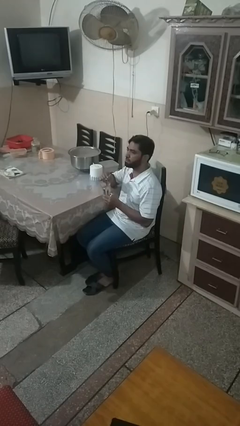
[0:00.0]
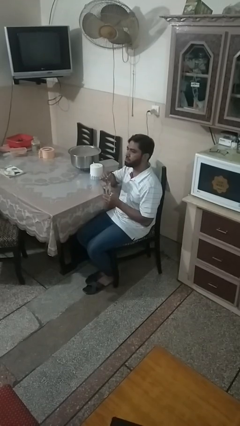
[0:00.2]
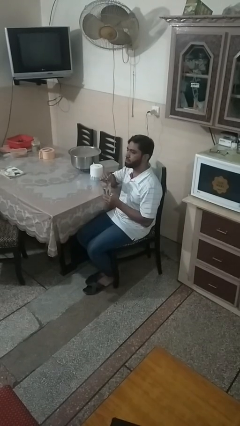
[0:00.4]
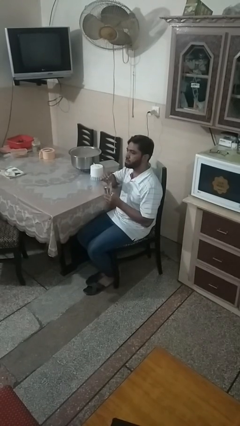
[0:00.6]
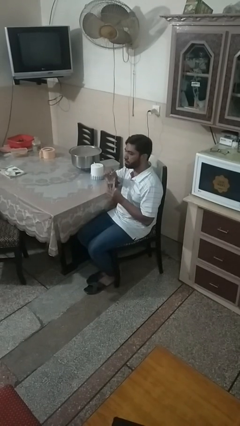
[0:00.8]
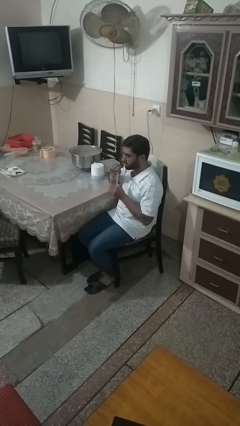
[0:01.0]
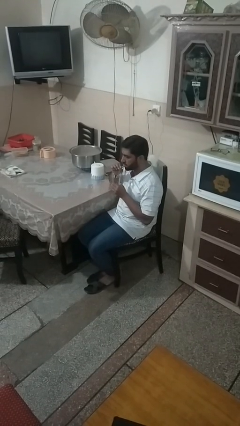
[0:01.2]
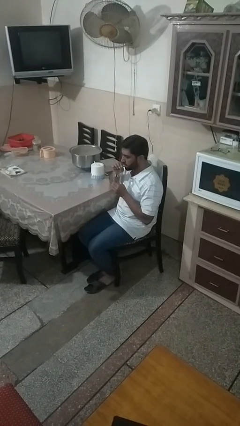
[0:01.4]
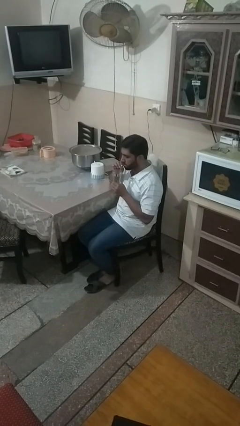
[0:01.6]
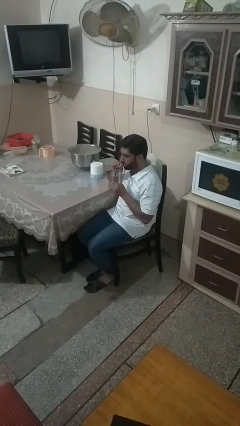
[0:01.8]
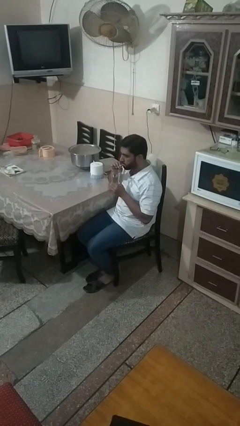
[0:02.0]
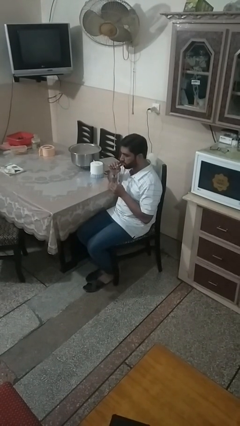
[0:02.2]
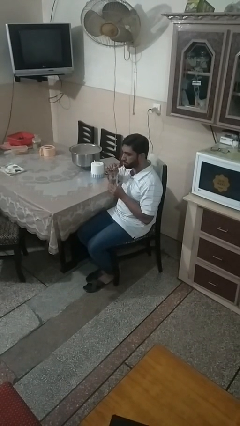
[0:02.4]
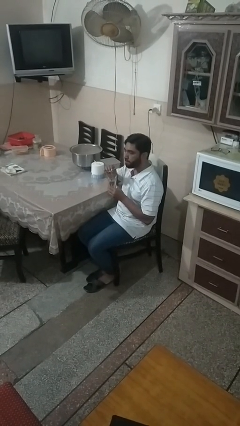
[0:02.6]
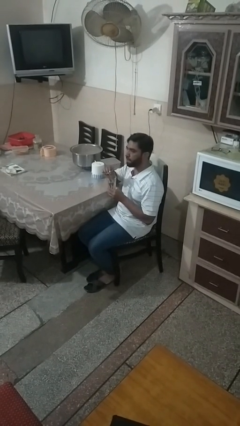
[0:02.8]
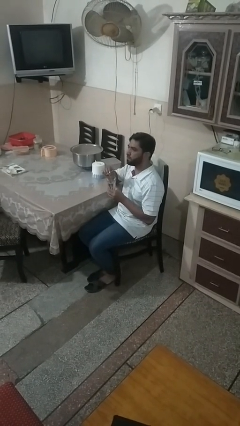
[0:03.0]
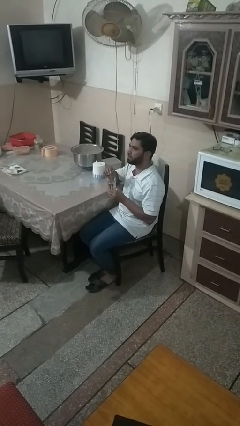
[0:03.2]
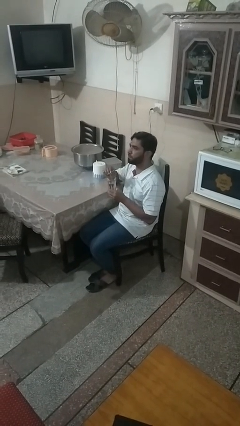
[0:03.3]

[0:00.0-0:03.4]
person drinks from straw

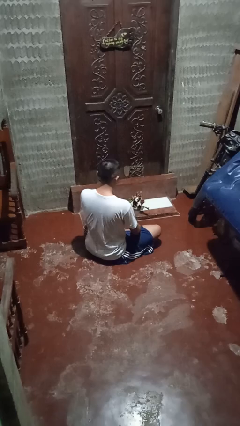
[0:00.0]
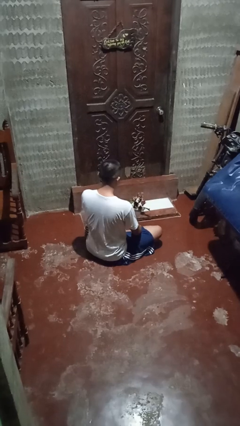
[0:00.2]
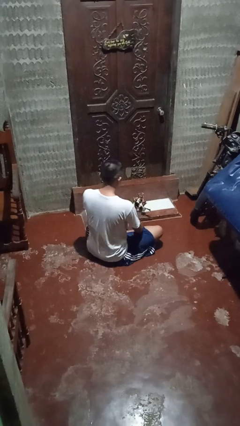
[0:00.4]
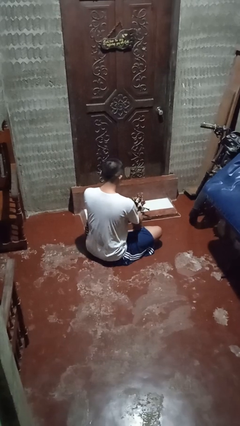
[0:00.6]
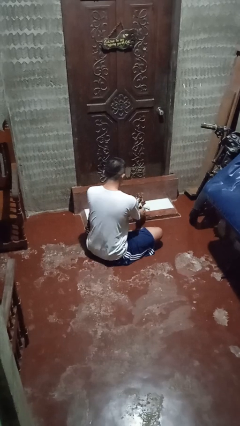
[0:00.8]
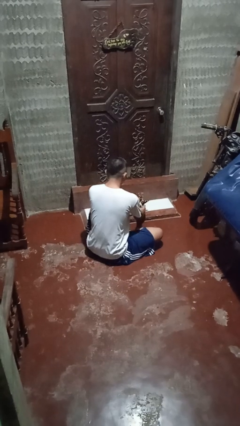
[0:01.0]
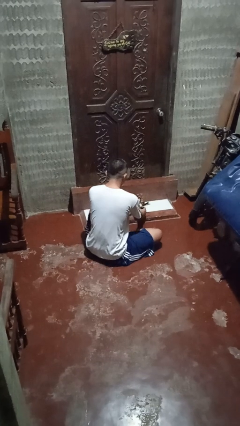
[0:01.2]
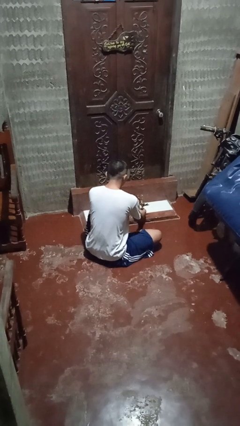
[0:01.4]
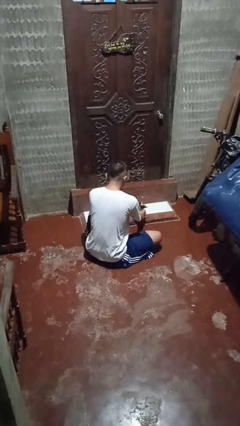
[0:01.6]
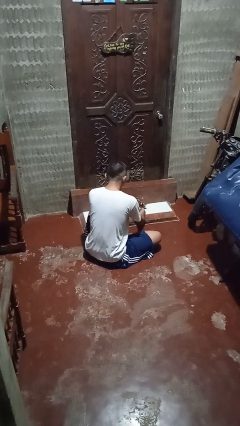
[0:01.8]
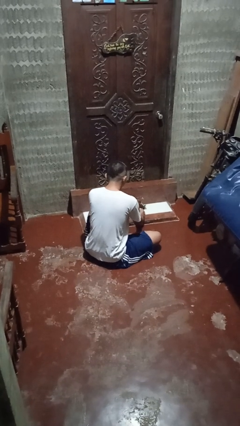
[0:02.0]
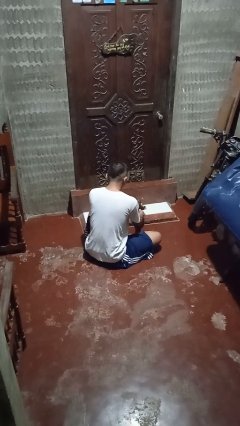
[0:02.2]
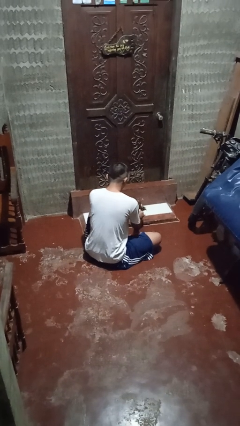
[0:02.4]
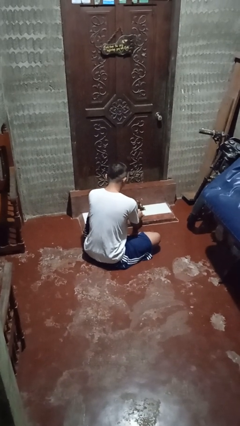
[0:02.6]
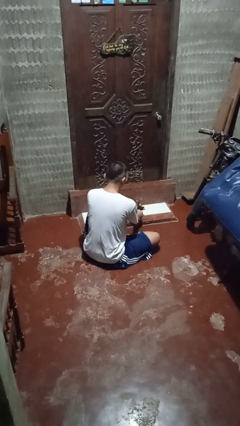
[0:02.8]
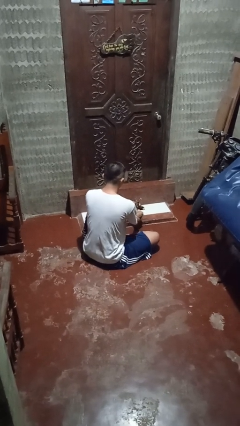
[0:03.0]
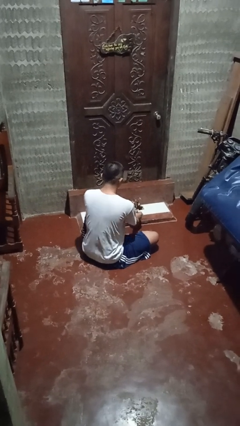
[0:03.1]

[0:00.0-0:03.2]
person arranges flowers in vase

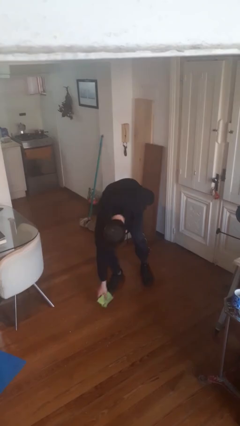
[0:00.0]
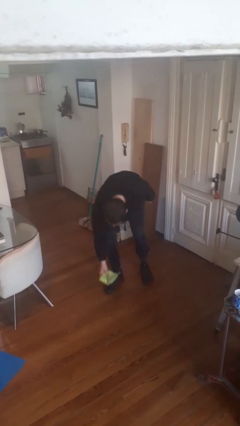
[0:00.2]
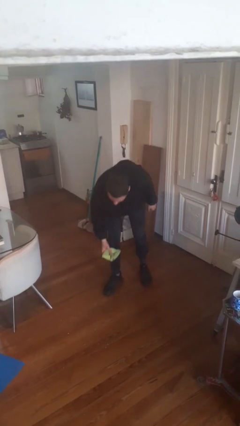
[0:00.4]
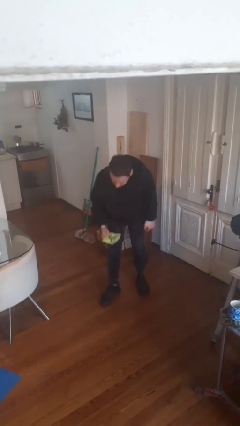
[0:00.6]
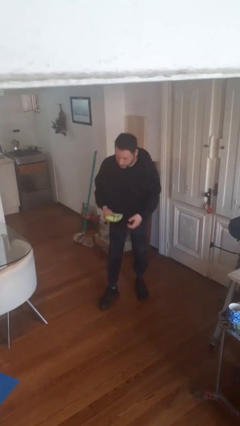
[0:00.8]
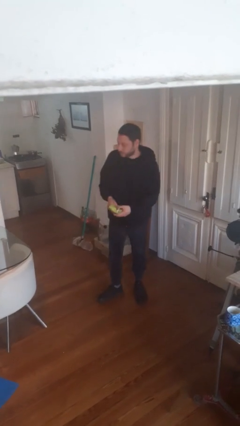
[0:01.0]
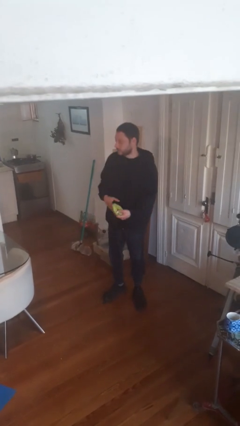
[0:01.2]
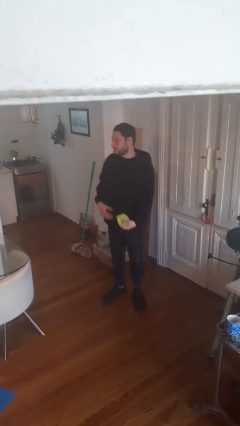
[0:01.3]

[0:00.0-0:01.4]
person picks up object from floor

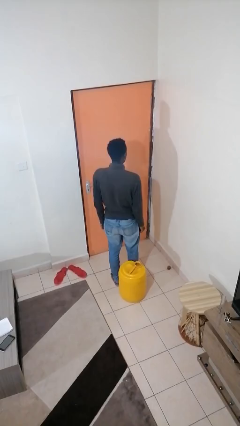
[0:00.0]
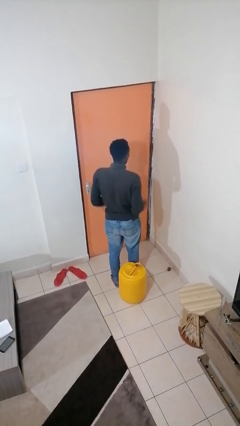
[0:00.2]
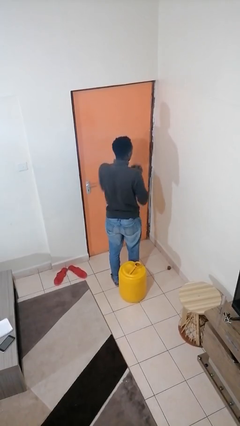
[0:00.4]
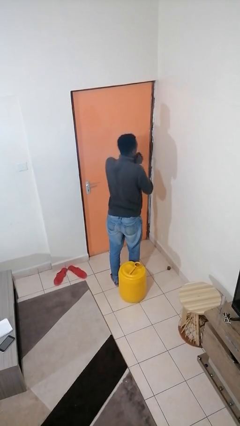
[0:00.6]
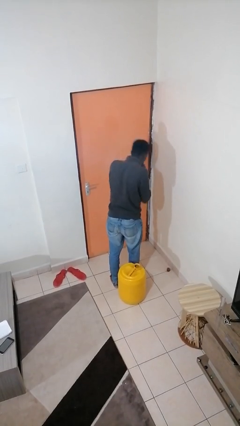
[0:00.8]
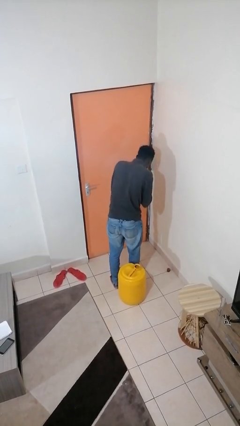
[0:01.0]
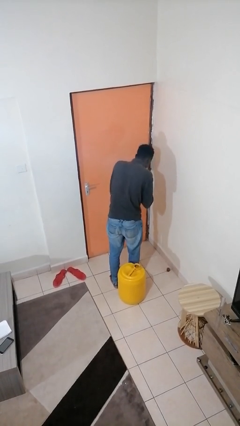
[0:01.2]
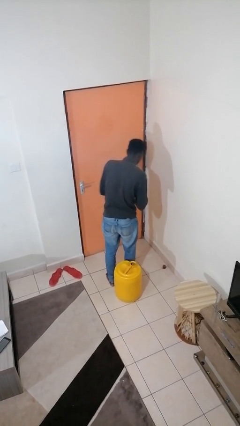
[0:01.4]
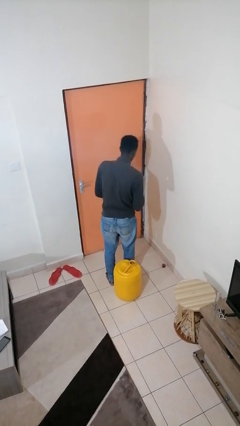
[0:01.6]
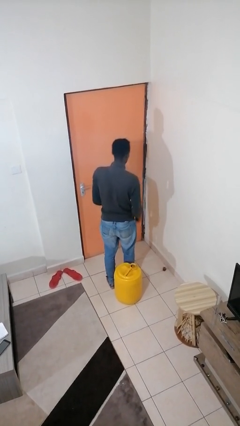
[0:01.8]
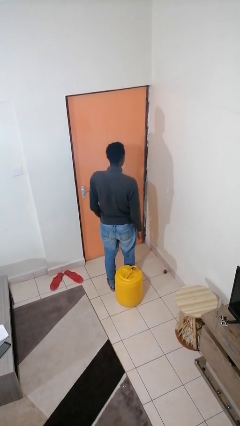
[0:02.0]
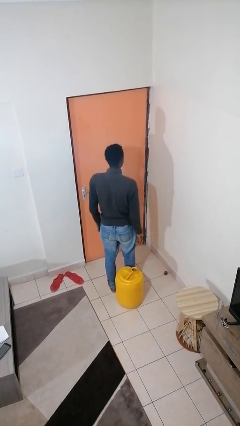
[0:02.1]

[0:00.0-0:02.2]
person sneezes into hand

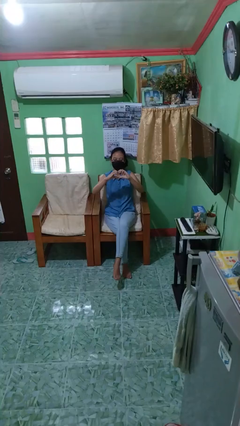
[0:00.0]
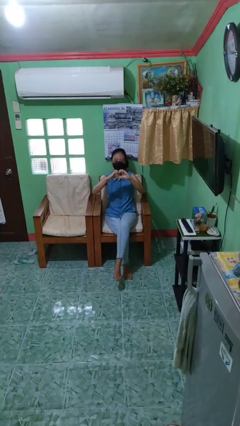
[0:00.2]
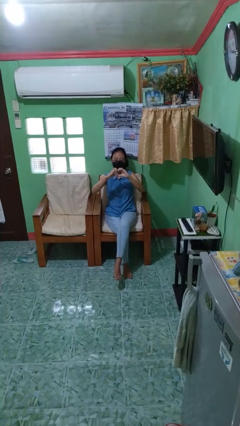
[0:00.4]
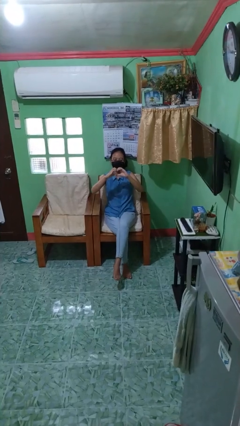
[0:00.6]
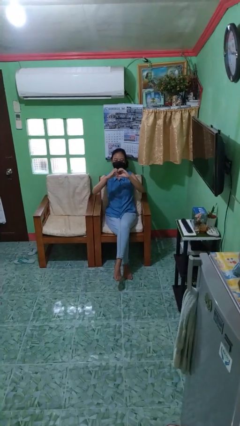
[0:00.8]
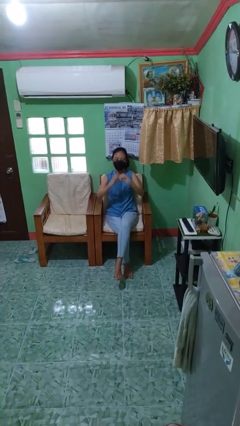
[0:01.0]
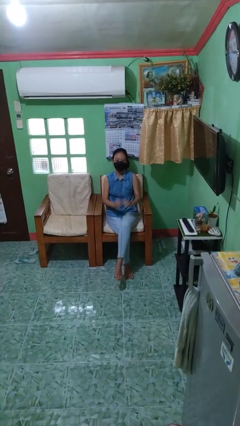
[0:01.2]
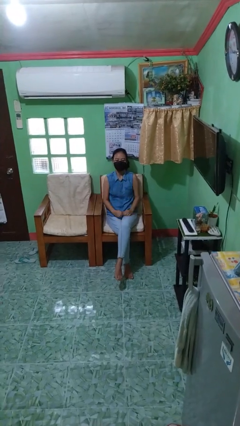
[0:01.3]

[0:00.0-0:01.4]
person gestures heart

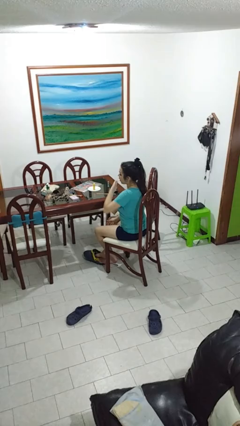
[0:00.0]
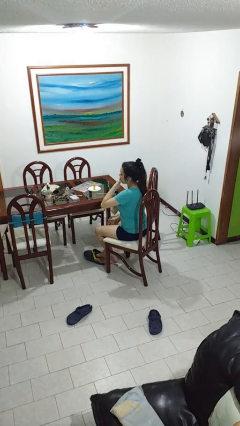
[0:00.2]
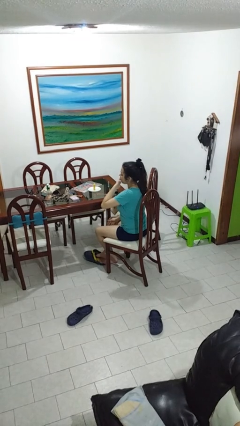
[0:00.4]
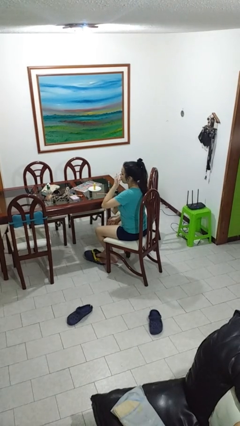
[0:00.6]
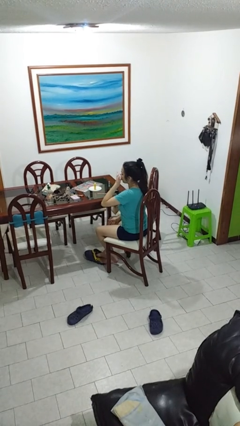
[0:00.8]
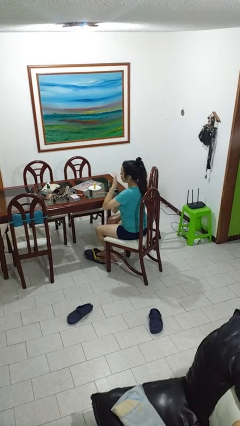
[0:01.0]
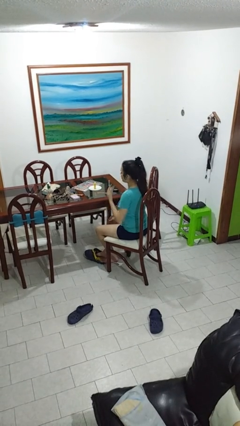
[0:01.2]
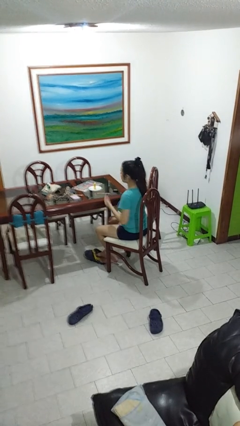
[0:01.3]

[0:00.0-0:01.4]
person licks fingers

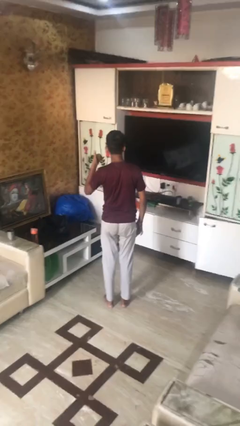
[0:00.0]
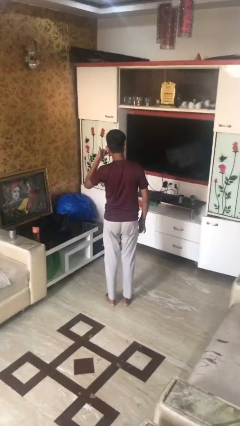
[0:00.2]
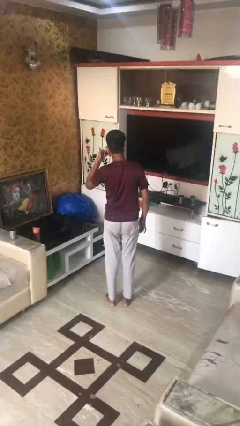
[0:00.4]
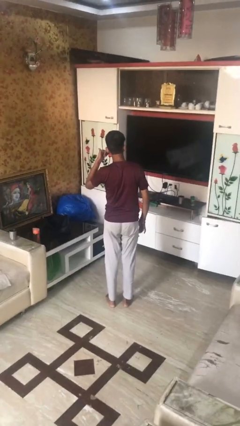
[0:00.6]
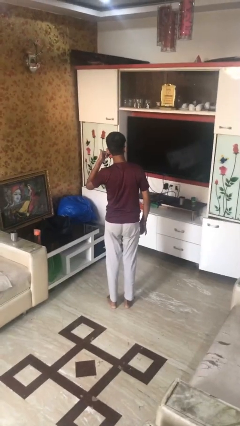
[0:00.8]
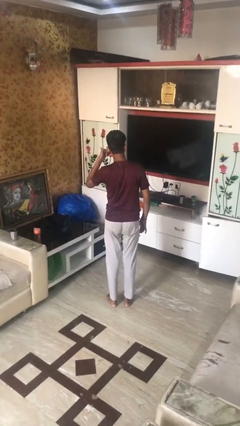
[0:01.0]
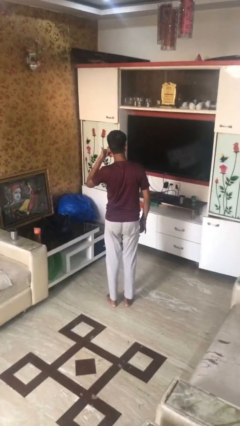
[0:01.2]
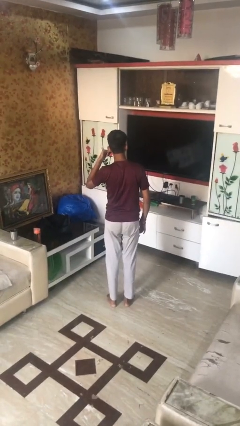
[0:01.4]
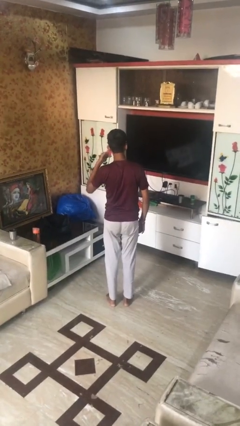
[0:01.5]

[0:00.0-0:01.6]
person gestures call me

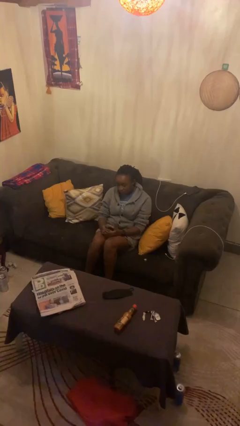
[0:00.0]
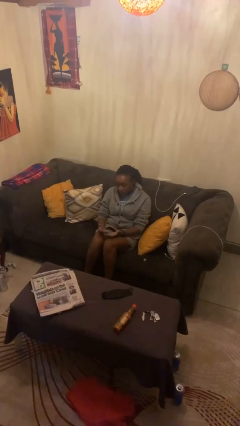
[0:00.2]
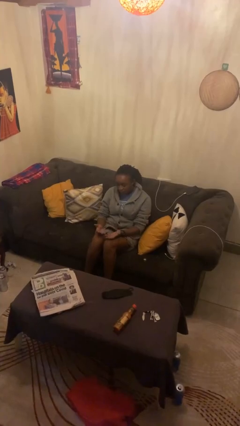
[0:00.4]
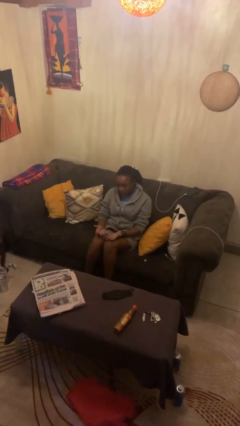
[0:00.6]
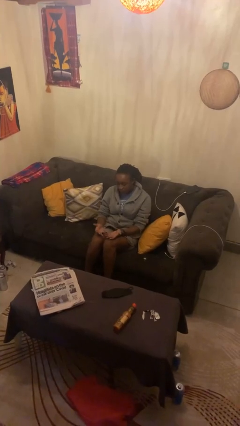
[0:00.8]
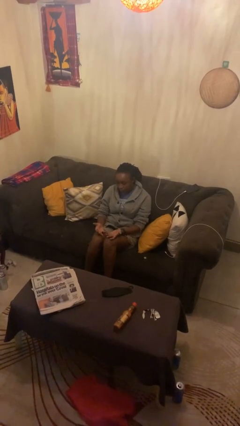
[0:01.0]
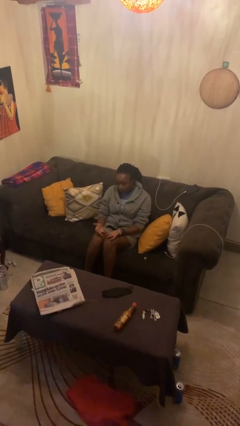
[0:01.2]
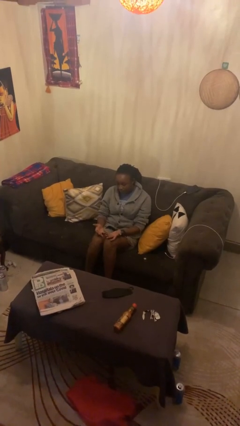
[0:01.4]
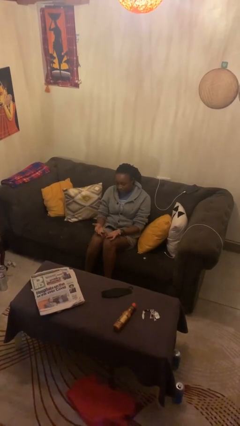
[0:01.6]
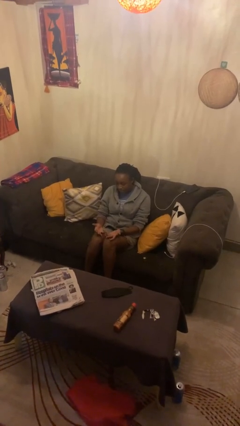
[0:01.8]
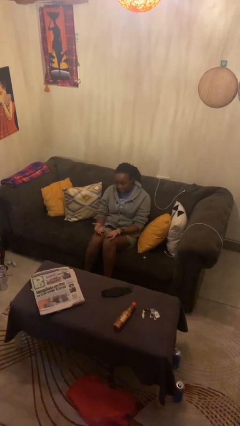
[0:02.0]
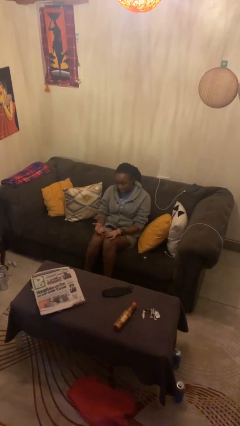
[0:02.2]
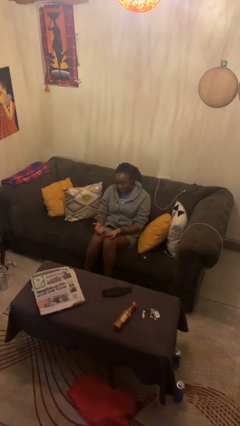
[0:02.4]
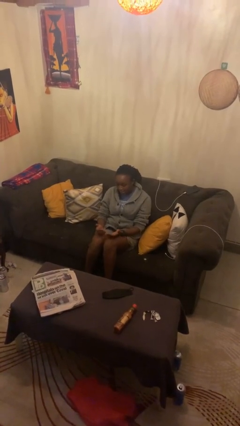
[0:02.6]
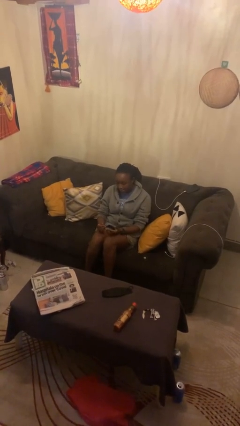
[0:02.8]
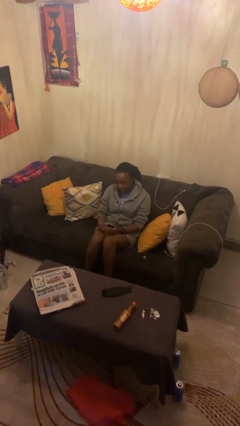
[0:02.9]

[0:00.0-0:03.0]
person looks at hands in lap
